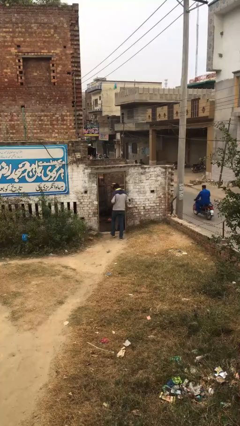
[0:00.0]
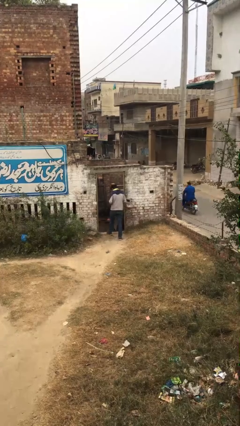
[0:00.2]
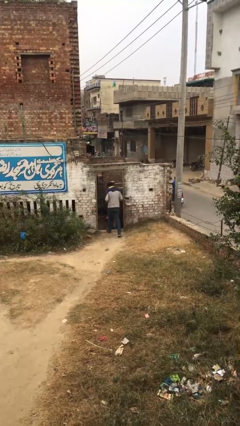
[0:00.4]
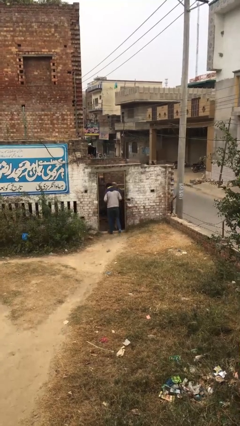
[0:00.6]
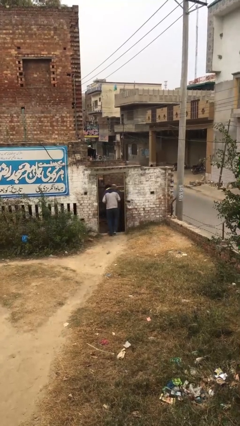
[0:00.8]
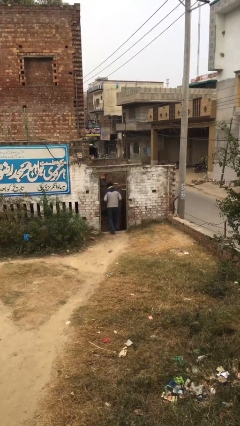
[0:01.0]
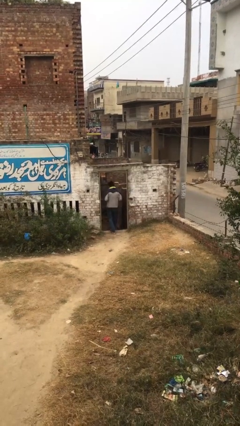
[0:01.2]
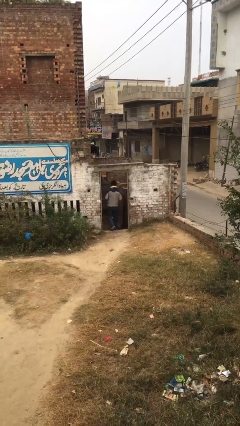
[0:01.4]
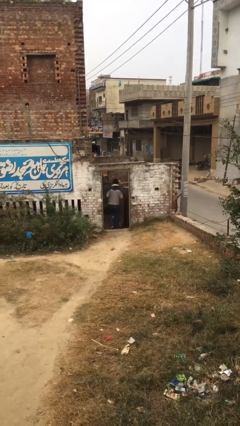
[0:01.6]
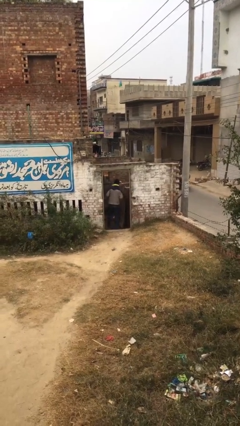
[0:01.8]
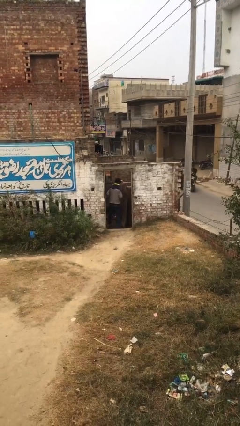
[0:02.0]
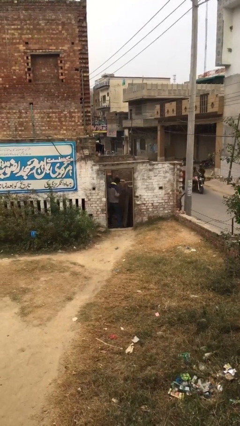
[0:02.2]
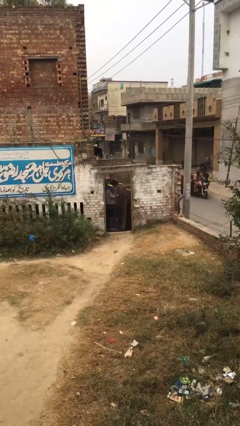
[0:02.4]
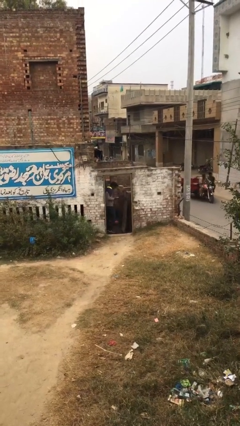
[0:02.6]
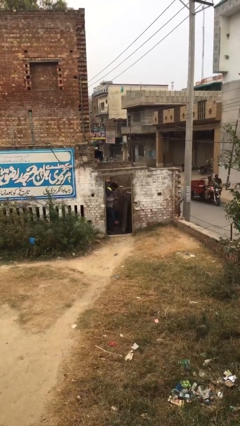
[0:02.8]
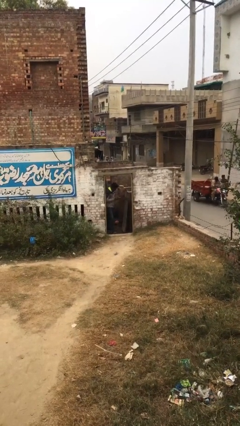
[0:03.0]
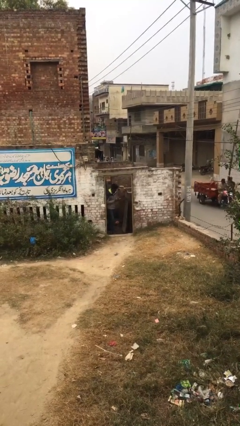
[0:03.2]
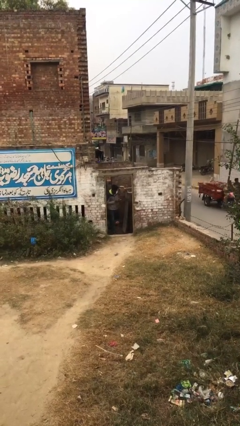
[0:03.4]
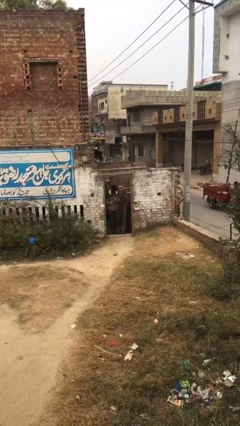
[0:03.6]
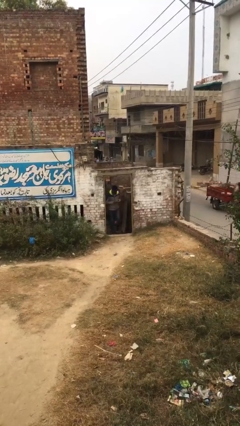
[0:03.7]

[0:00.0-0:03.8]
person enters scene through structure

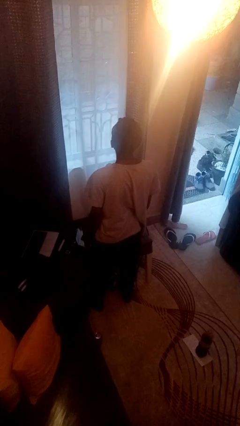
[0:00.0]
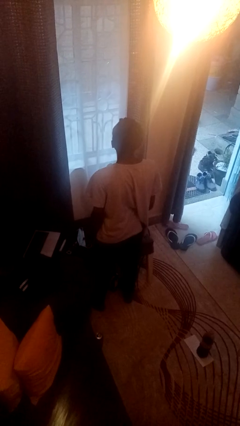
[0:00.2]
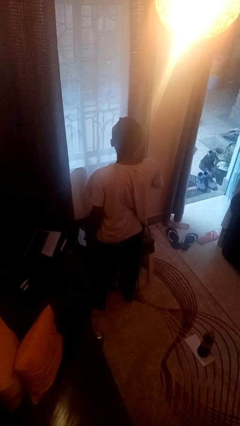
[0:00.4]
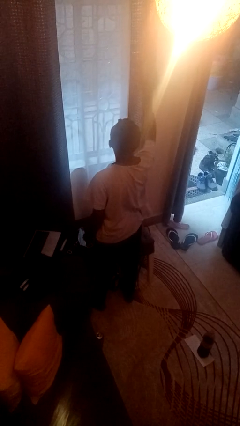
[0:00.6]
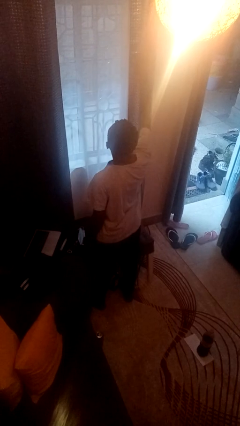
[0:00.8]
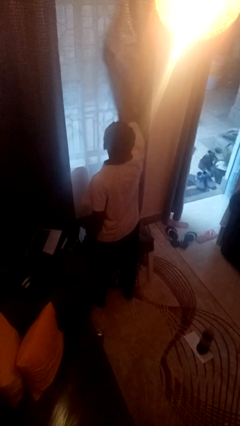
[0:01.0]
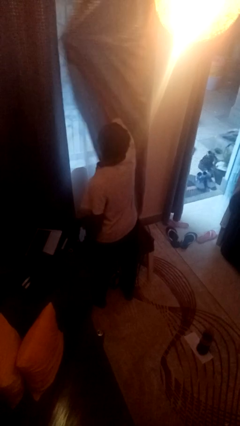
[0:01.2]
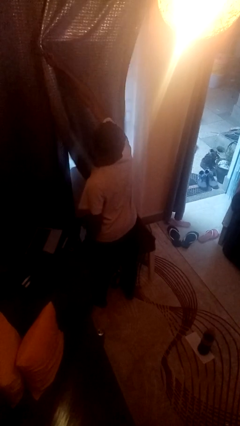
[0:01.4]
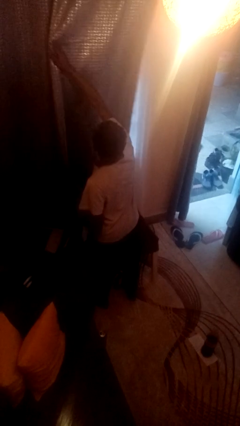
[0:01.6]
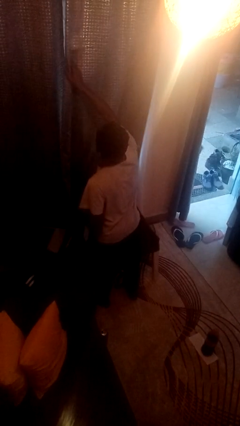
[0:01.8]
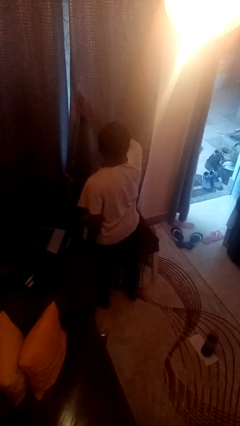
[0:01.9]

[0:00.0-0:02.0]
person closes curtains

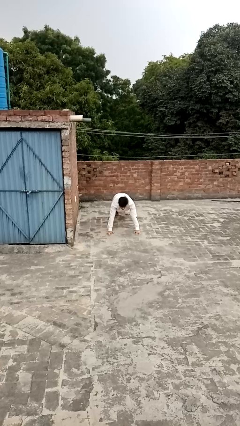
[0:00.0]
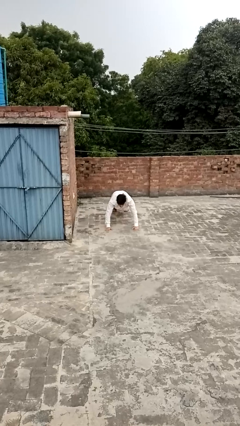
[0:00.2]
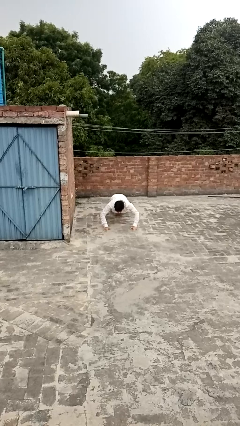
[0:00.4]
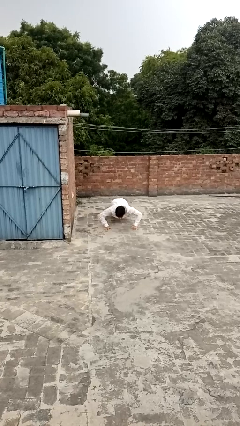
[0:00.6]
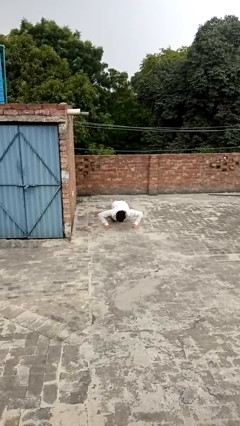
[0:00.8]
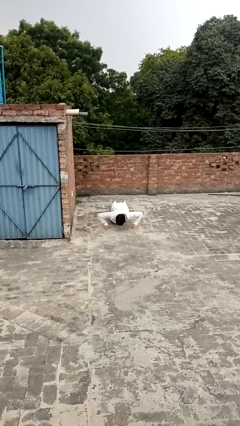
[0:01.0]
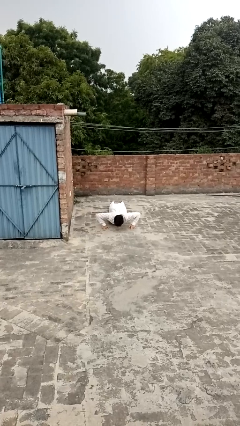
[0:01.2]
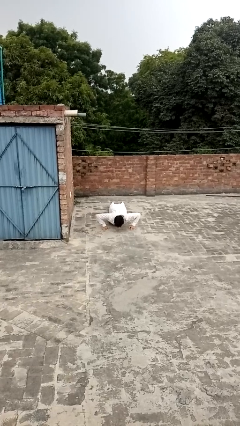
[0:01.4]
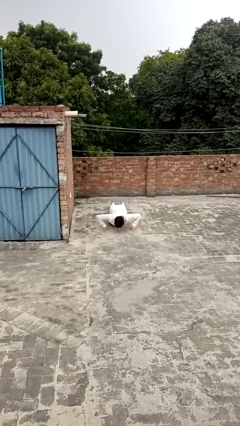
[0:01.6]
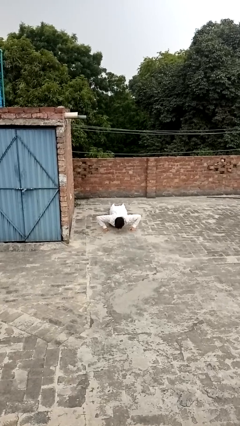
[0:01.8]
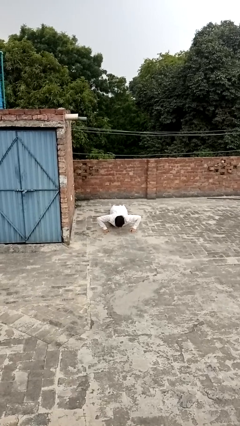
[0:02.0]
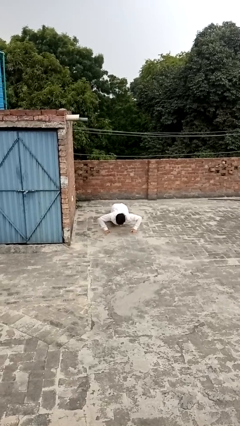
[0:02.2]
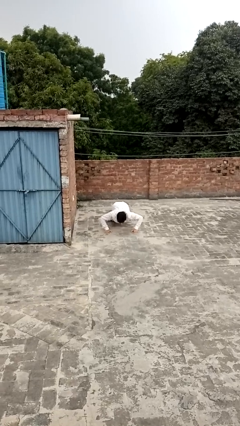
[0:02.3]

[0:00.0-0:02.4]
person exercises with pushup

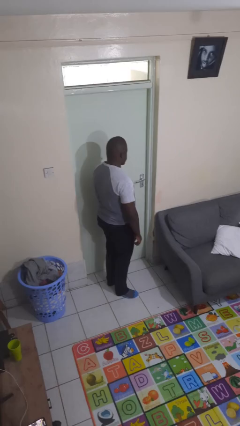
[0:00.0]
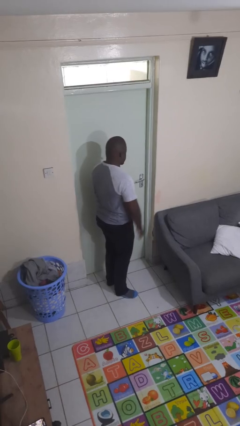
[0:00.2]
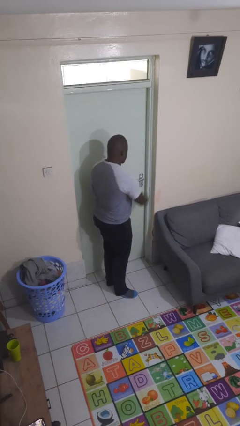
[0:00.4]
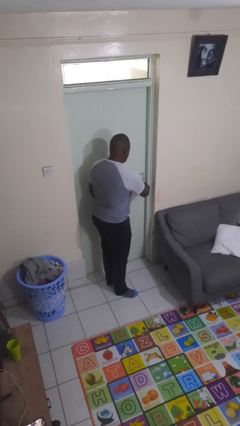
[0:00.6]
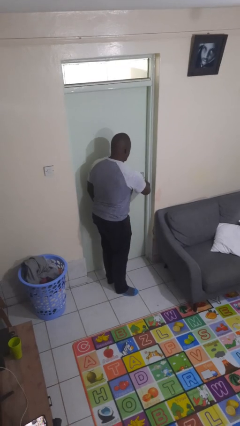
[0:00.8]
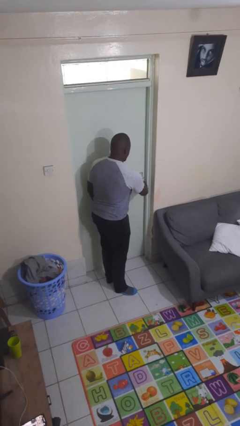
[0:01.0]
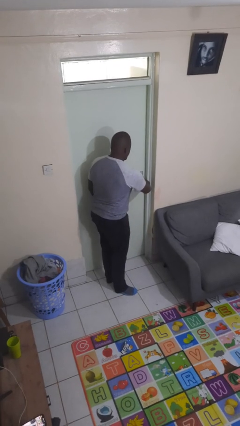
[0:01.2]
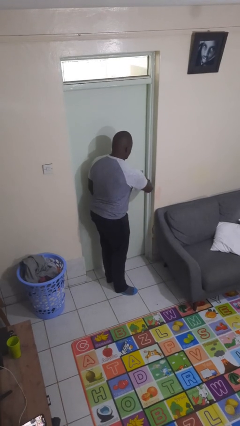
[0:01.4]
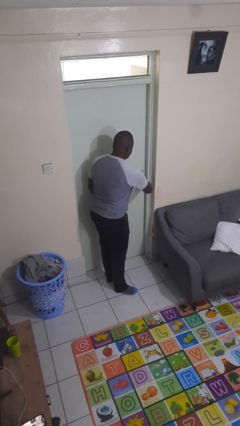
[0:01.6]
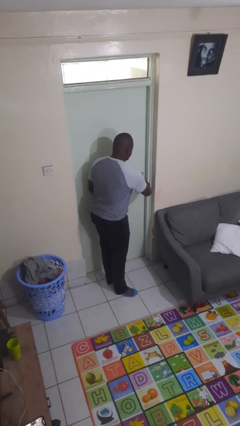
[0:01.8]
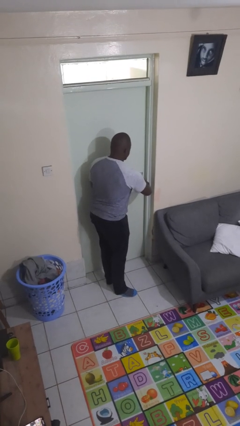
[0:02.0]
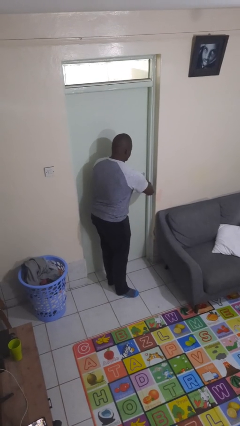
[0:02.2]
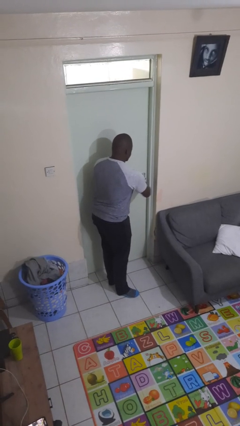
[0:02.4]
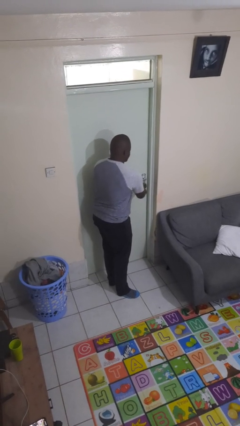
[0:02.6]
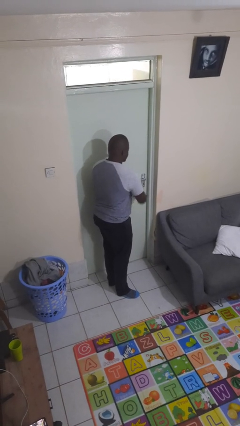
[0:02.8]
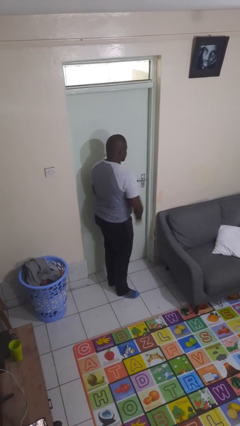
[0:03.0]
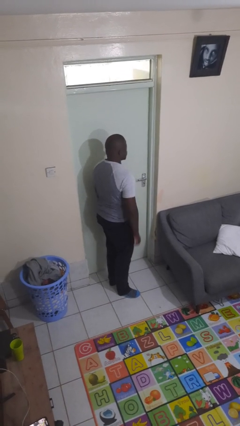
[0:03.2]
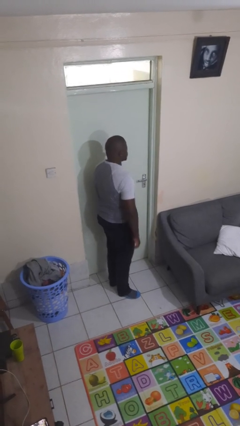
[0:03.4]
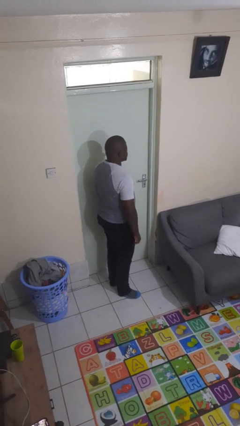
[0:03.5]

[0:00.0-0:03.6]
person locks door with keys

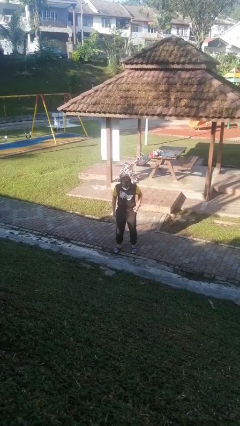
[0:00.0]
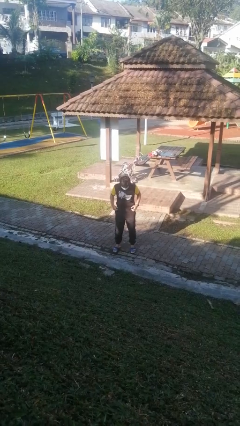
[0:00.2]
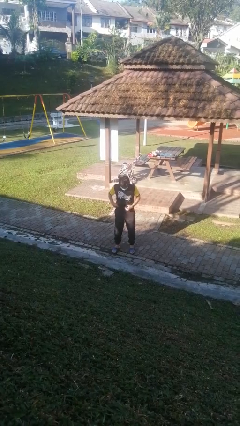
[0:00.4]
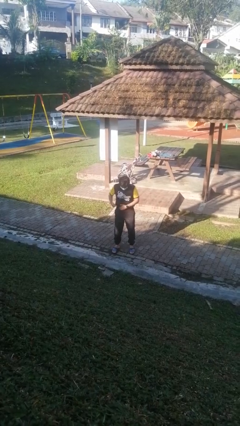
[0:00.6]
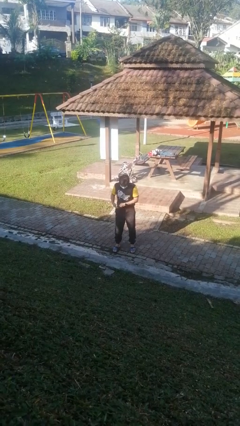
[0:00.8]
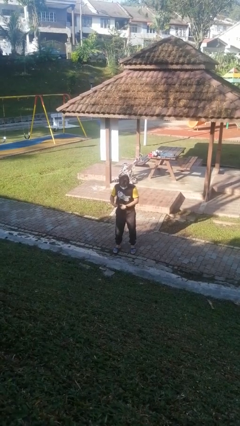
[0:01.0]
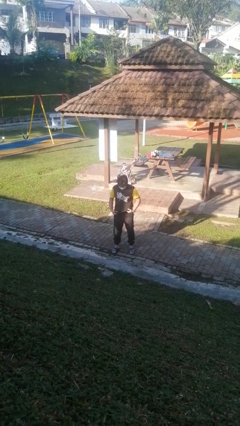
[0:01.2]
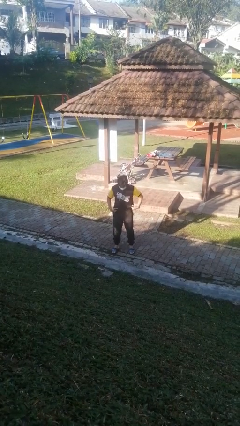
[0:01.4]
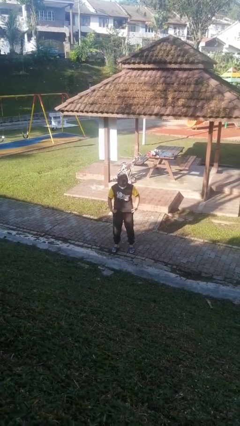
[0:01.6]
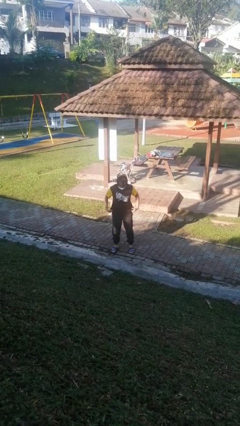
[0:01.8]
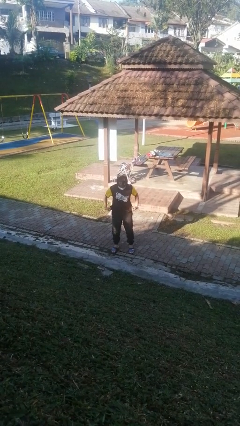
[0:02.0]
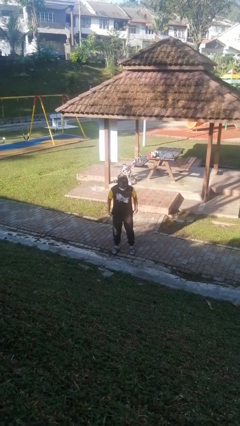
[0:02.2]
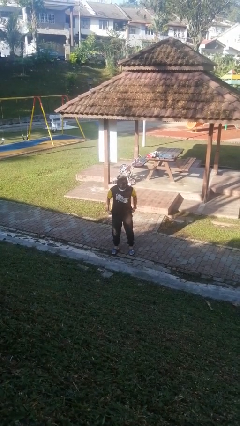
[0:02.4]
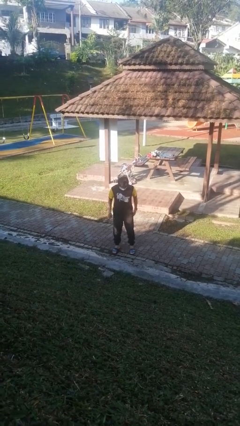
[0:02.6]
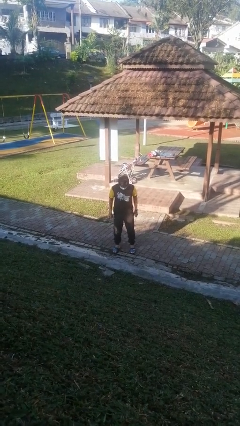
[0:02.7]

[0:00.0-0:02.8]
person untucks shirt

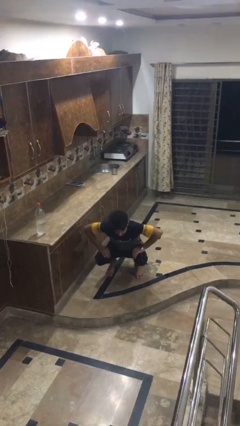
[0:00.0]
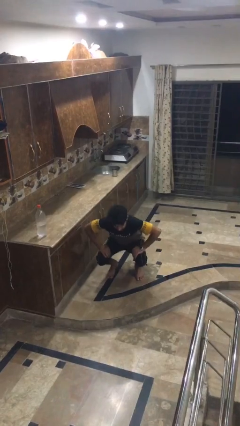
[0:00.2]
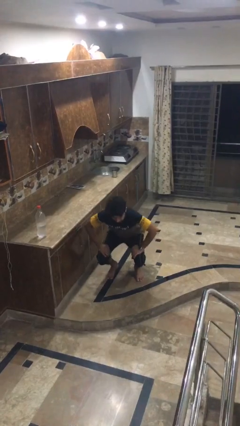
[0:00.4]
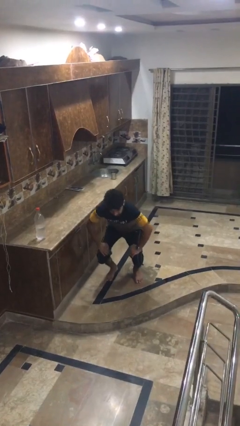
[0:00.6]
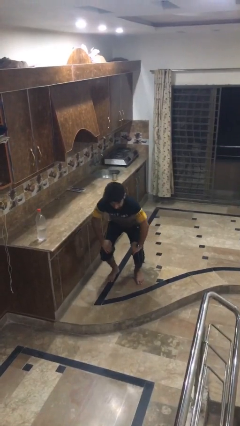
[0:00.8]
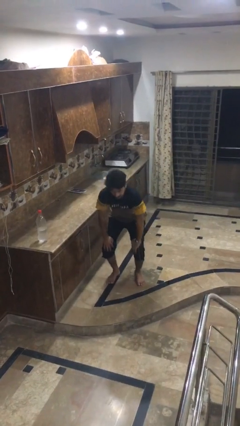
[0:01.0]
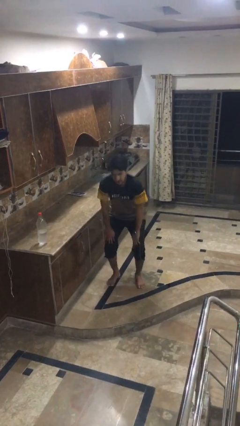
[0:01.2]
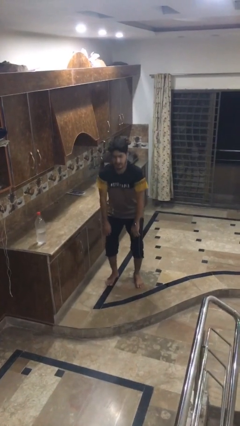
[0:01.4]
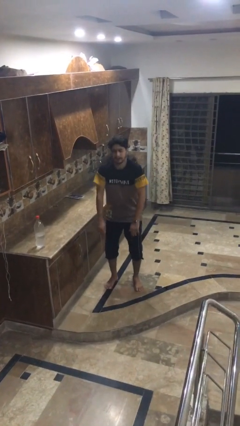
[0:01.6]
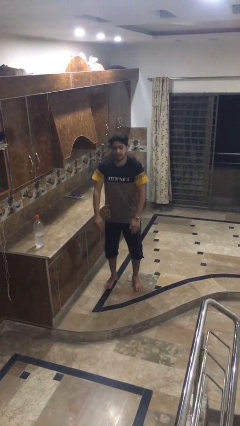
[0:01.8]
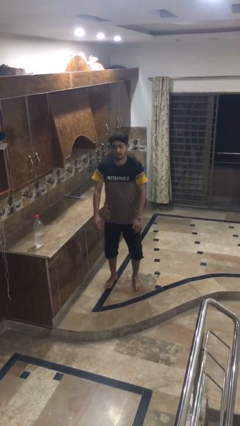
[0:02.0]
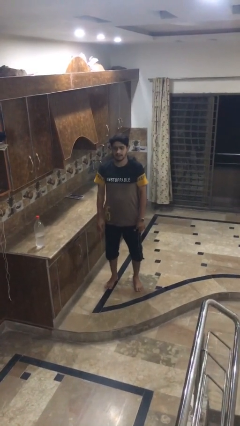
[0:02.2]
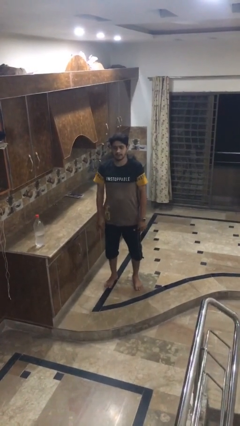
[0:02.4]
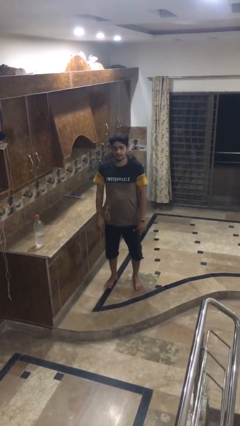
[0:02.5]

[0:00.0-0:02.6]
person stands up
